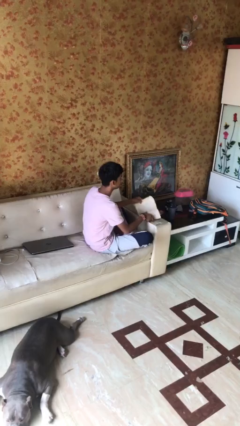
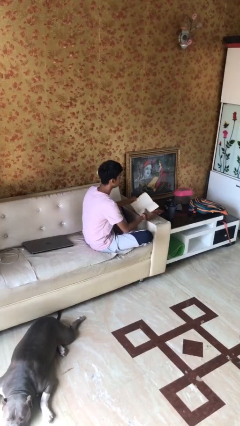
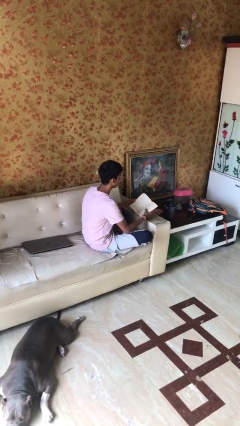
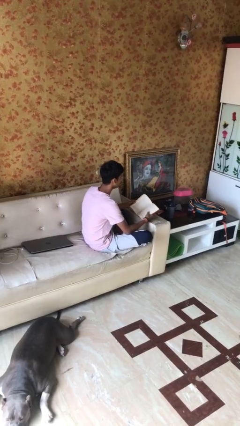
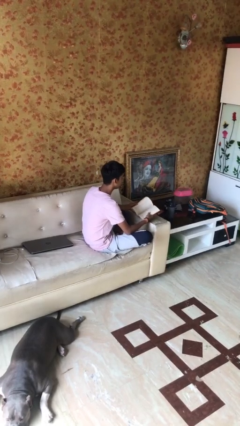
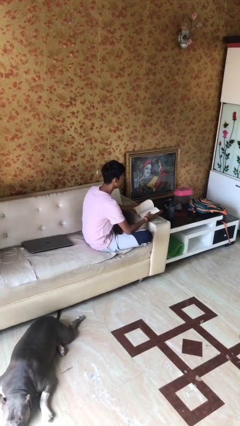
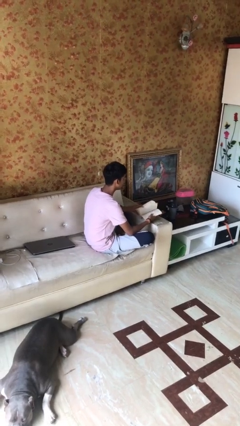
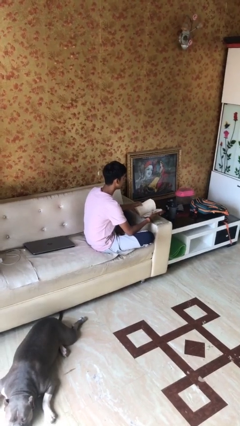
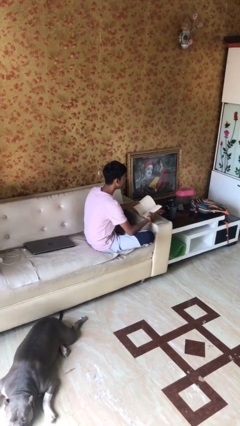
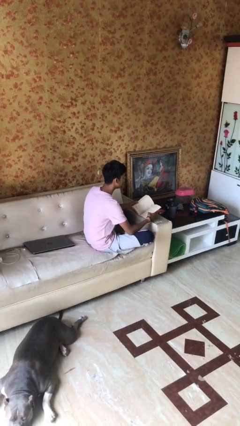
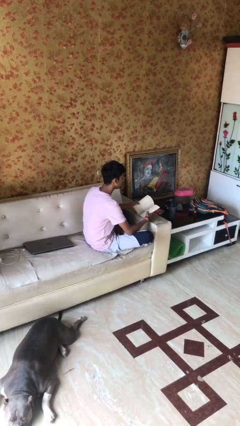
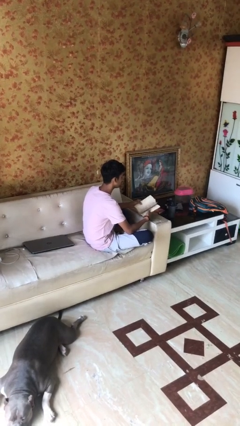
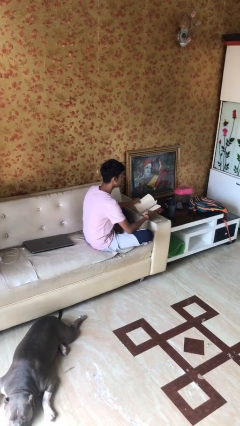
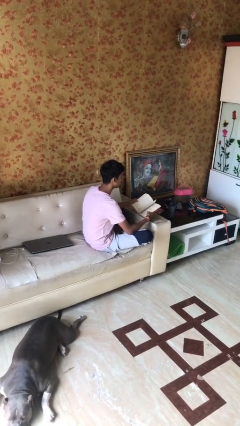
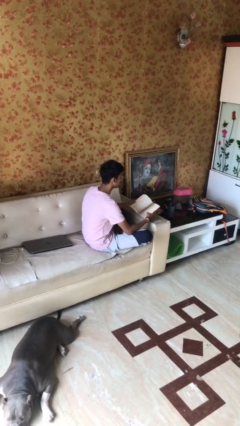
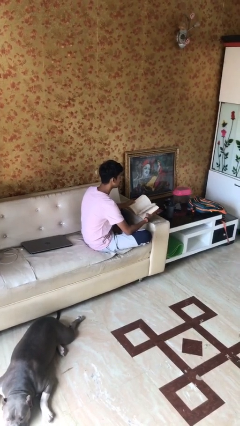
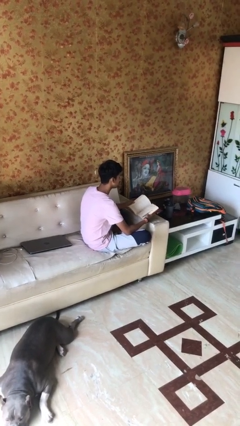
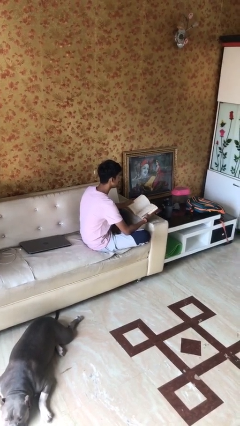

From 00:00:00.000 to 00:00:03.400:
person reads book

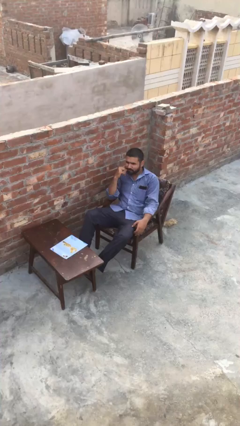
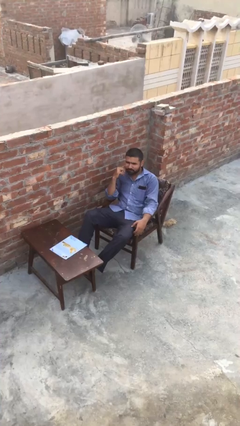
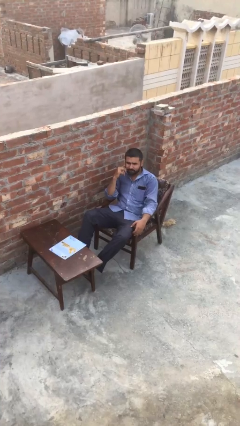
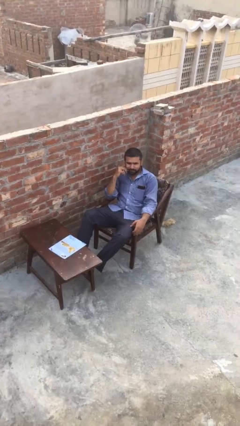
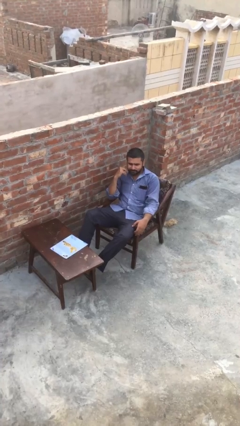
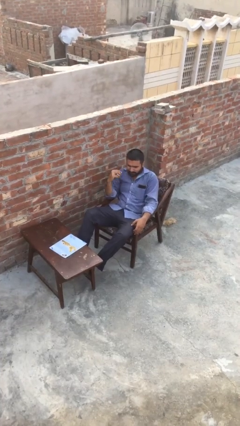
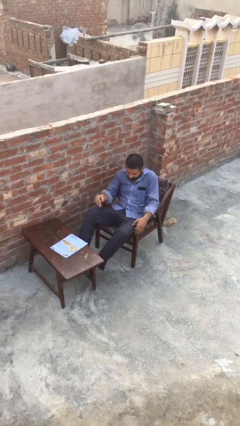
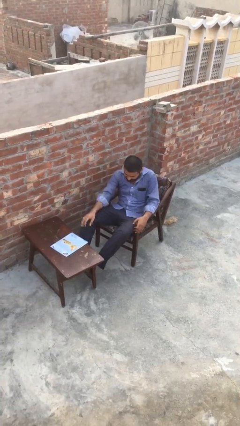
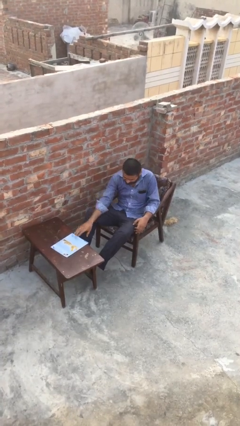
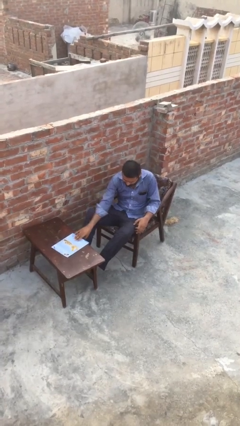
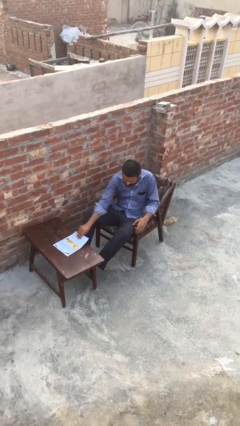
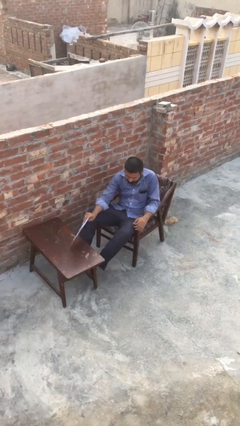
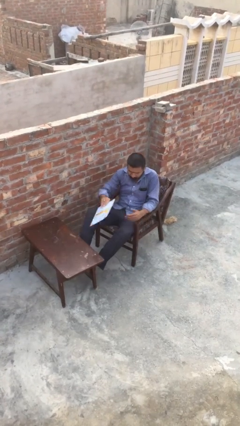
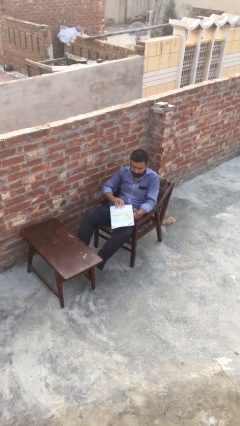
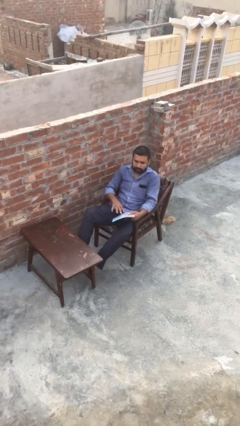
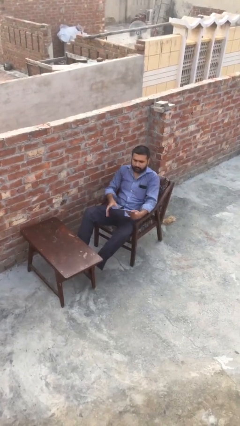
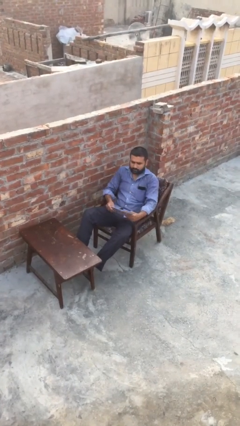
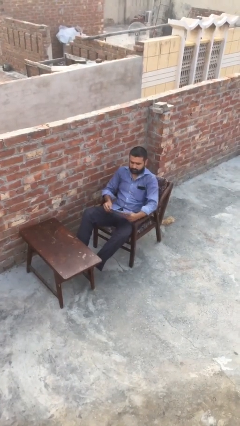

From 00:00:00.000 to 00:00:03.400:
person picks up object from table

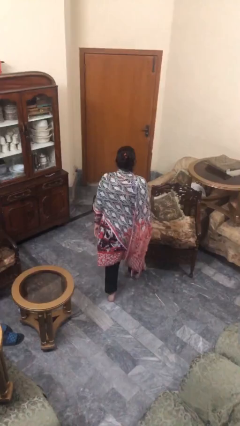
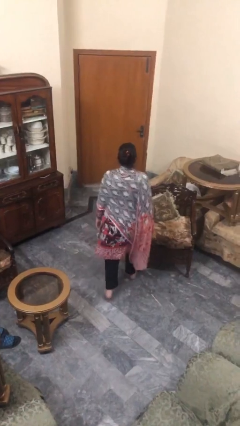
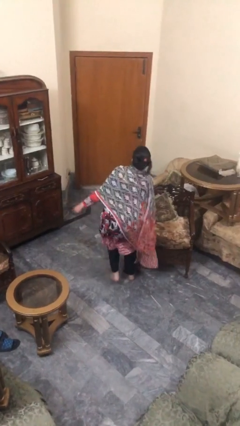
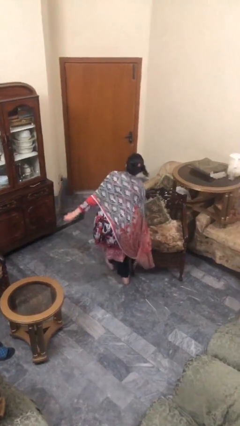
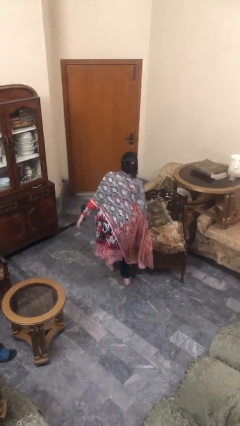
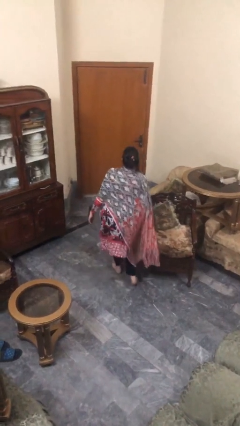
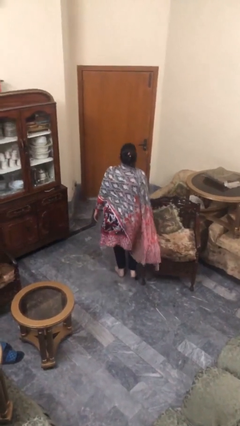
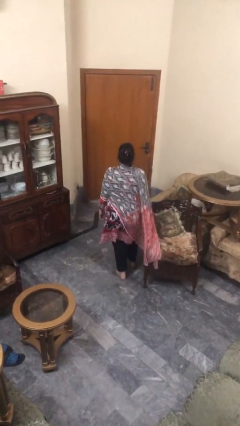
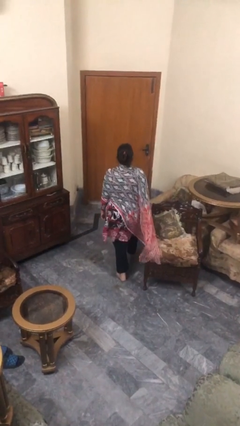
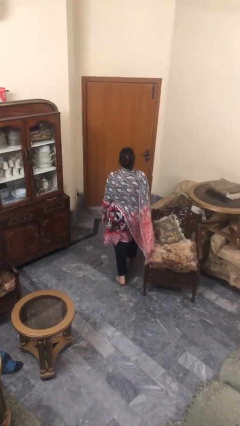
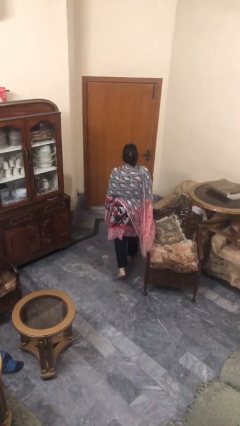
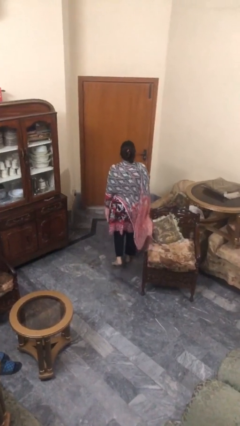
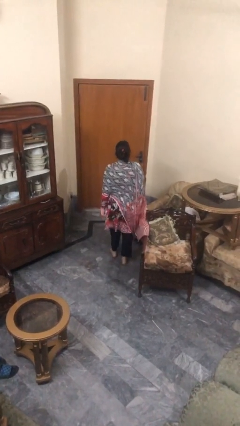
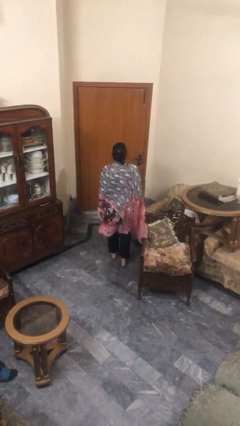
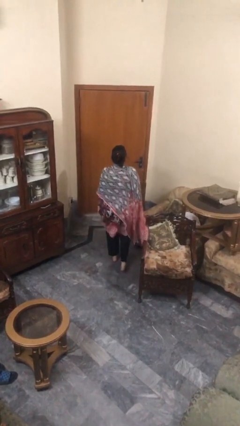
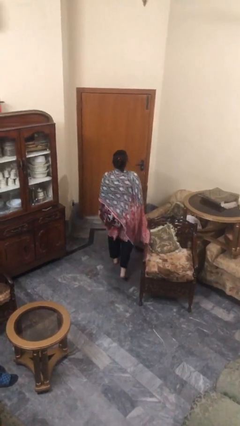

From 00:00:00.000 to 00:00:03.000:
person stubs toe

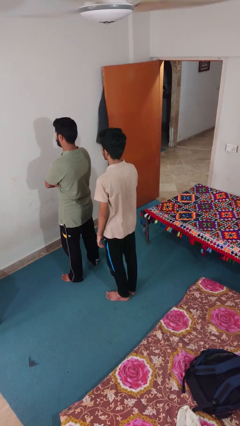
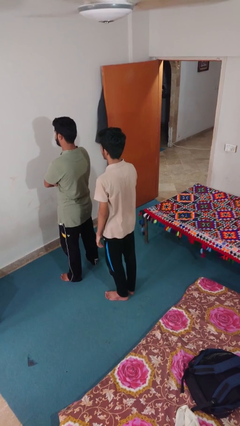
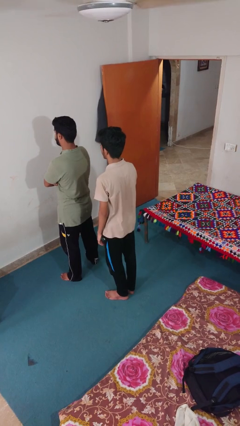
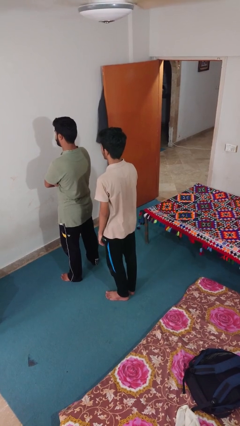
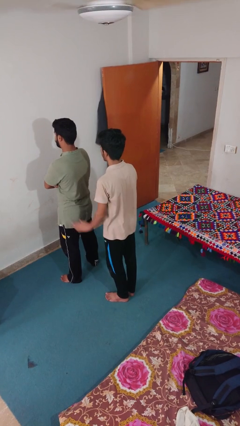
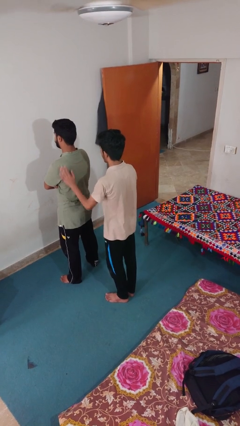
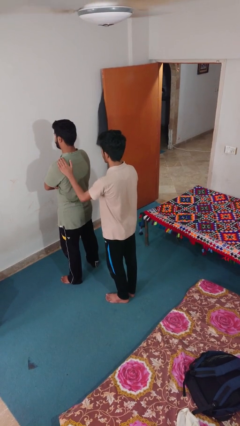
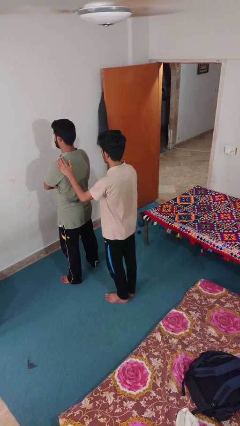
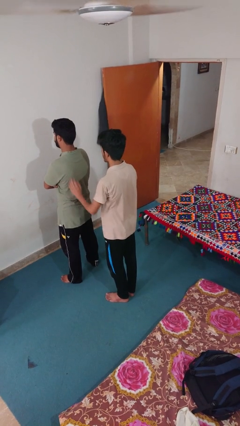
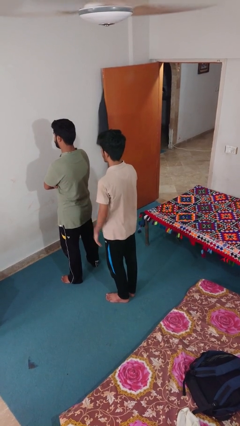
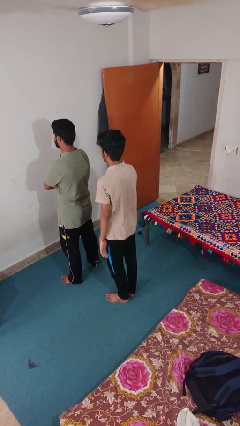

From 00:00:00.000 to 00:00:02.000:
person touches back of person

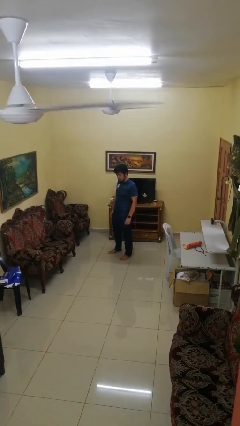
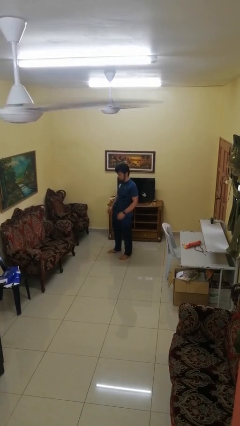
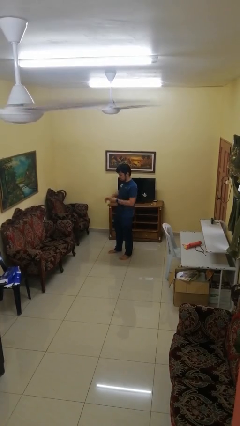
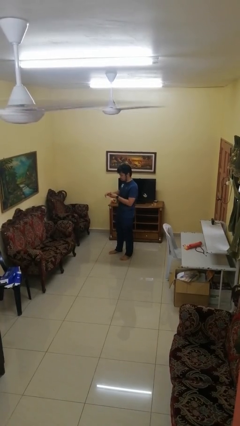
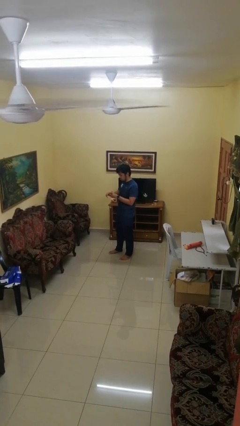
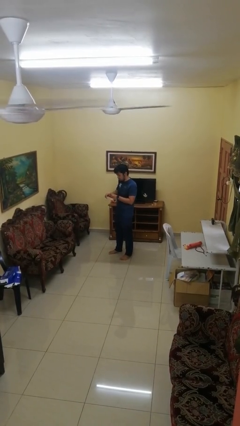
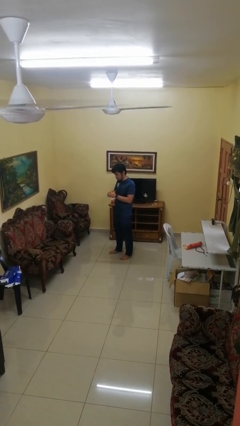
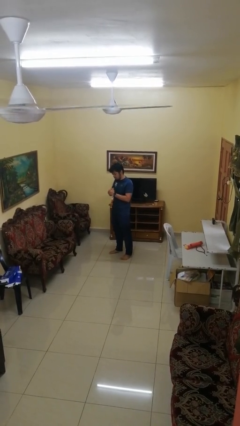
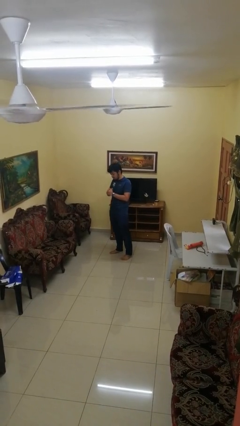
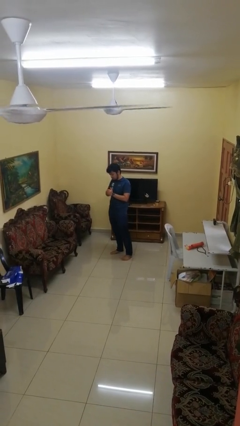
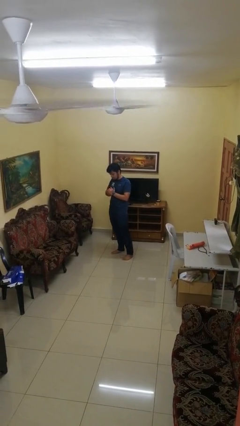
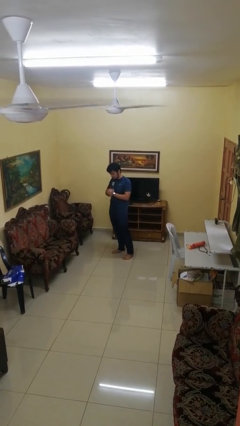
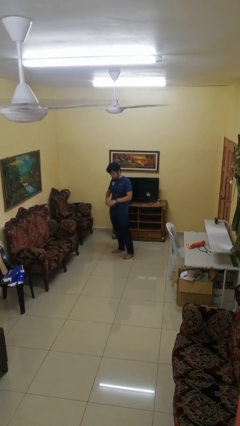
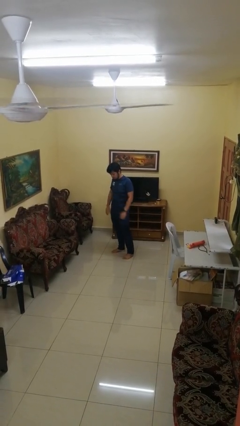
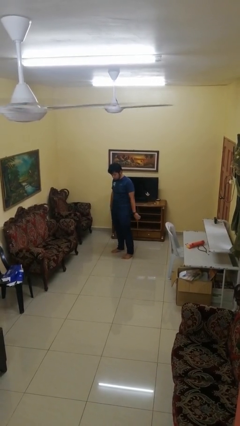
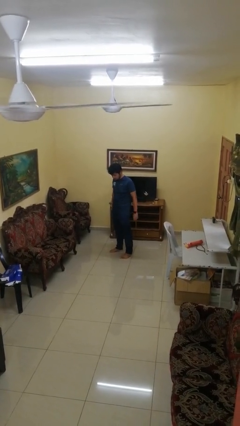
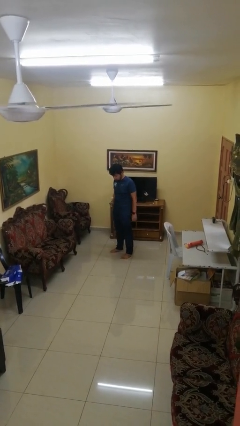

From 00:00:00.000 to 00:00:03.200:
person cracks knuckles

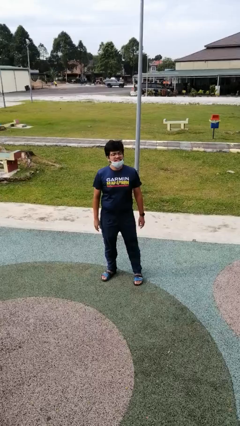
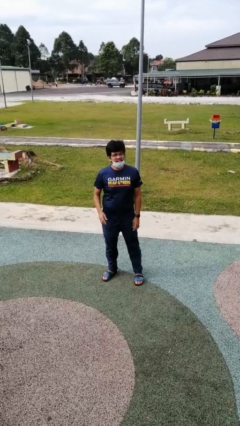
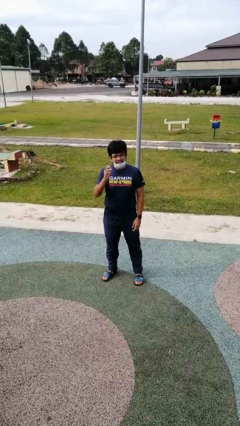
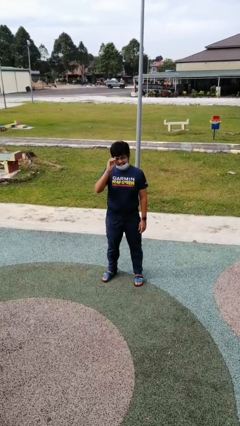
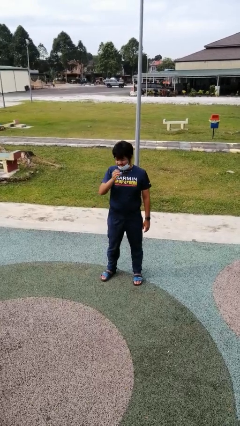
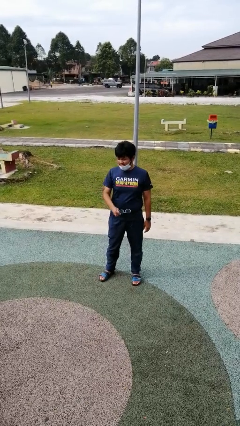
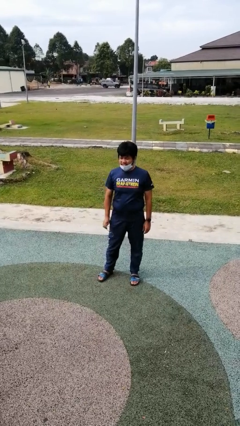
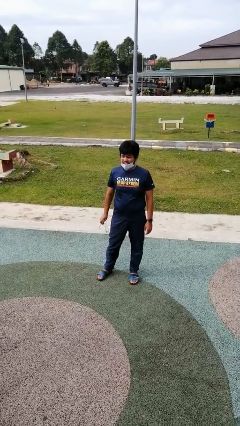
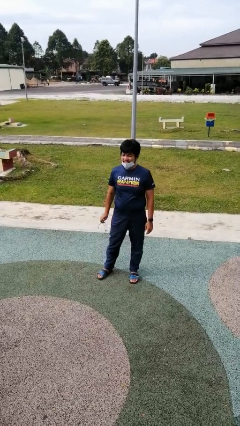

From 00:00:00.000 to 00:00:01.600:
person takes off glasses

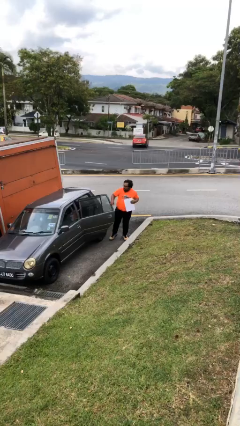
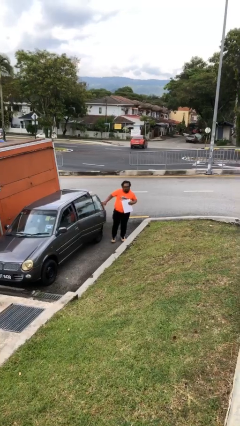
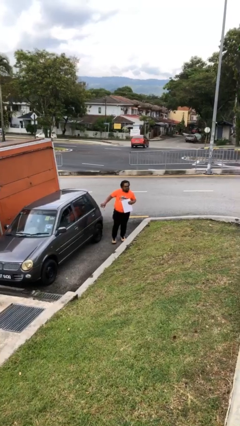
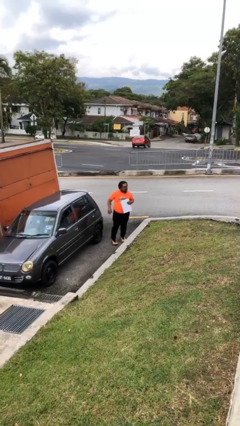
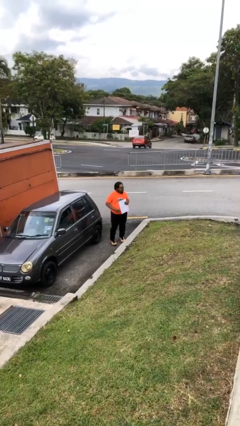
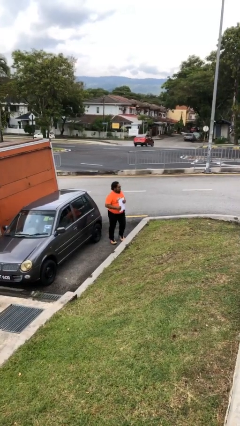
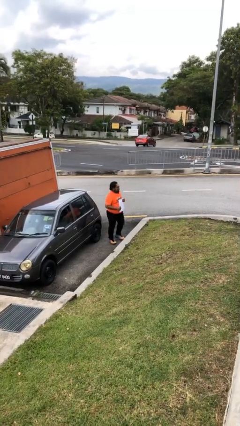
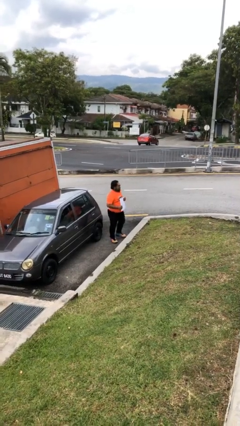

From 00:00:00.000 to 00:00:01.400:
person closes car door
